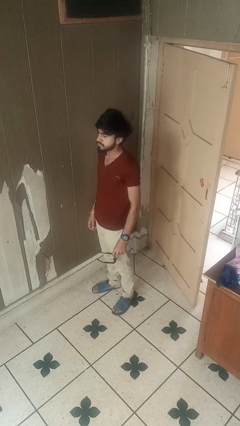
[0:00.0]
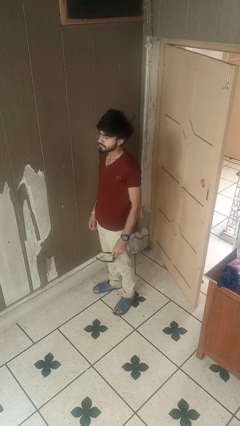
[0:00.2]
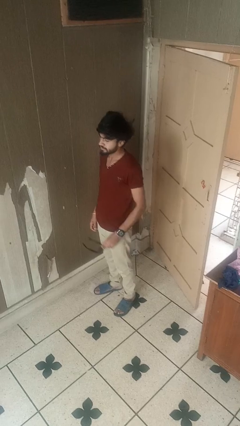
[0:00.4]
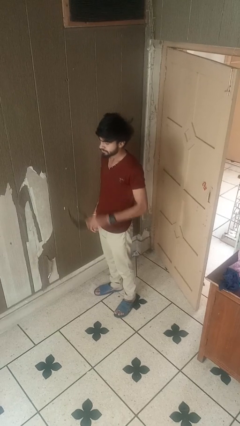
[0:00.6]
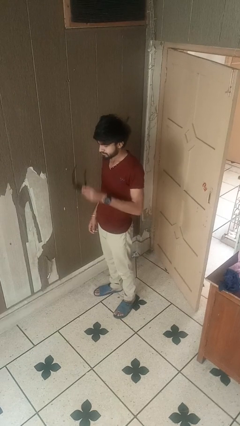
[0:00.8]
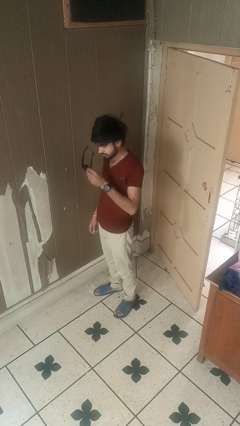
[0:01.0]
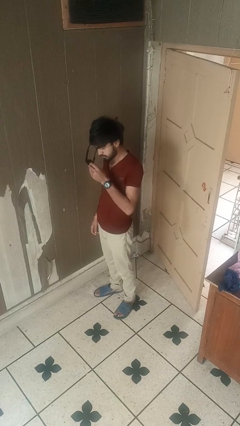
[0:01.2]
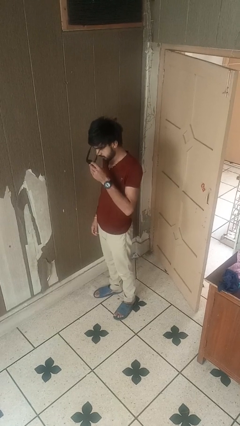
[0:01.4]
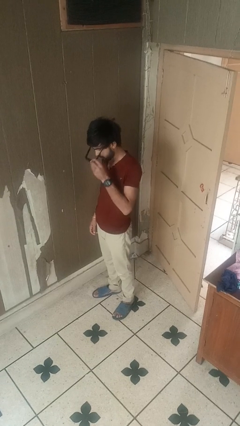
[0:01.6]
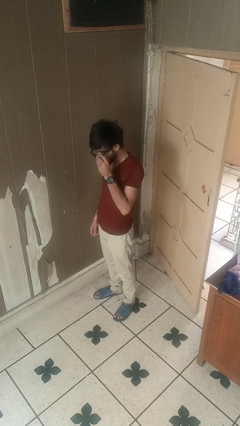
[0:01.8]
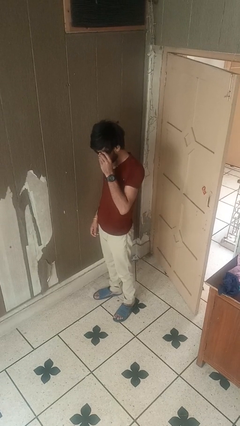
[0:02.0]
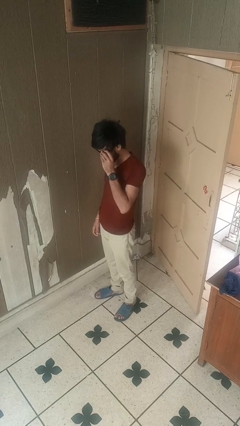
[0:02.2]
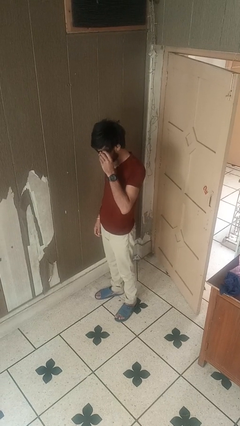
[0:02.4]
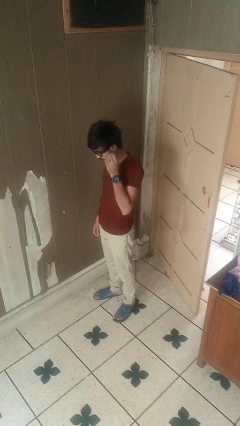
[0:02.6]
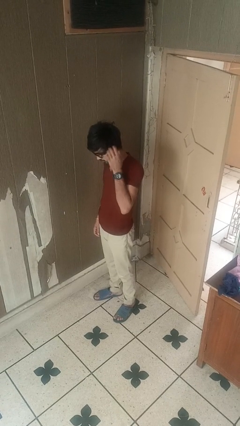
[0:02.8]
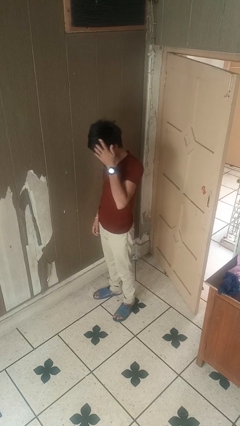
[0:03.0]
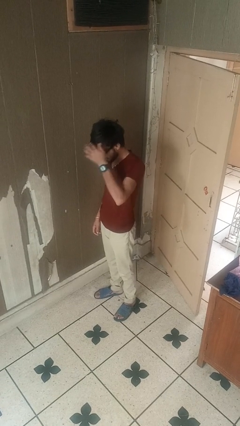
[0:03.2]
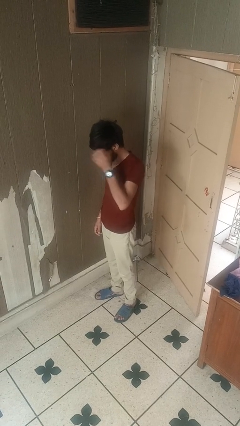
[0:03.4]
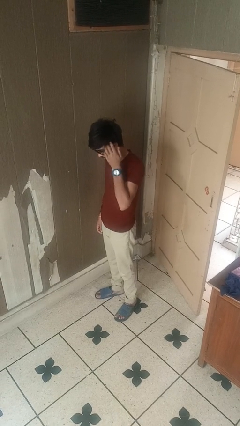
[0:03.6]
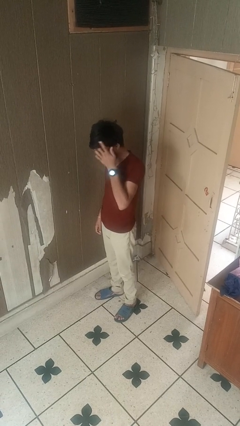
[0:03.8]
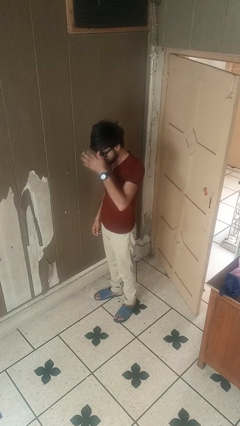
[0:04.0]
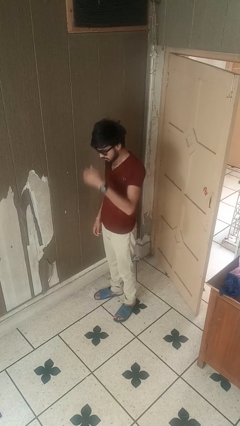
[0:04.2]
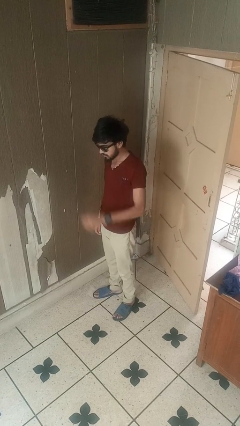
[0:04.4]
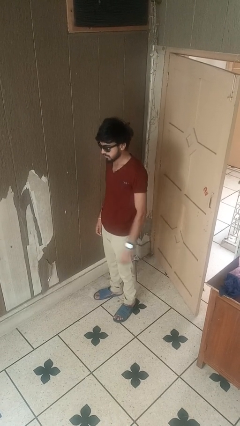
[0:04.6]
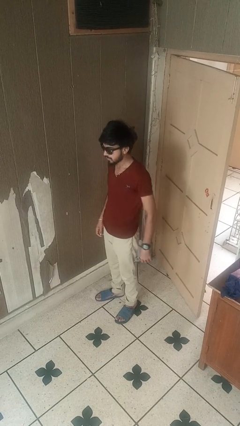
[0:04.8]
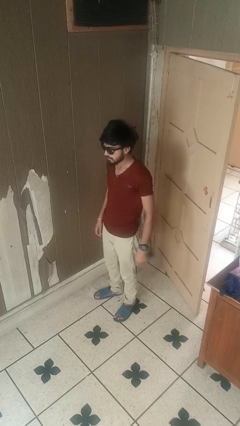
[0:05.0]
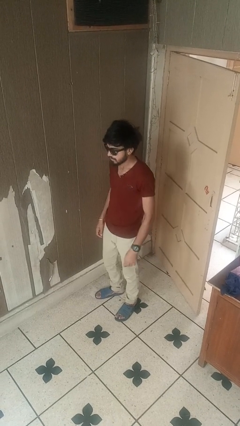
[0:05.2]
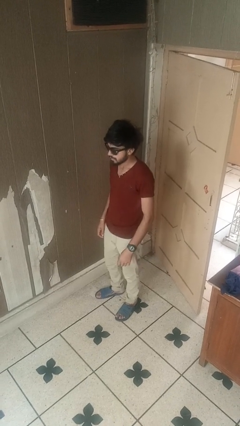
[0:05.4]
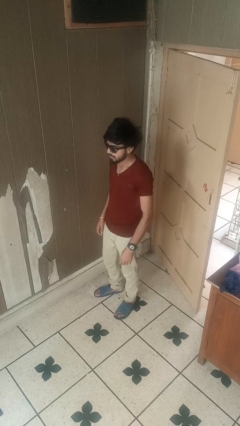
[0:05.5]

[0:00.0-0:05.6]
person puts on sunglasses

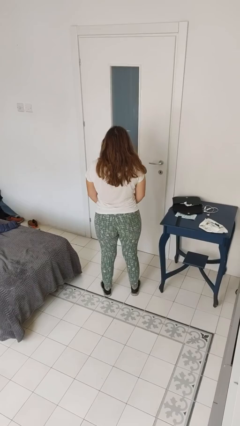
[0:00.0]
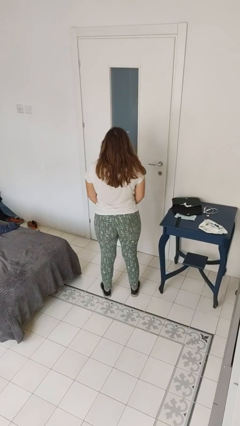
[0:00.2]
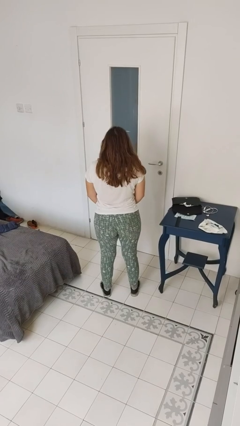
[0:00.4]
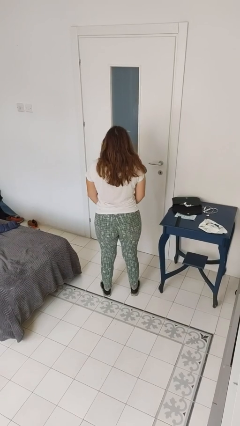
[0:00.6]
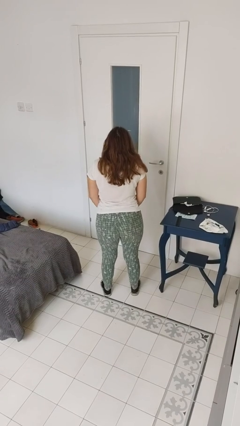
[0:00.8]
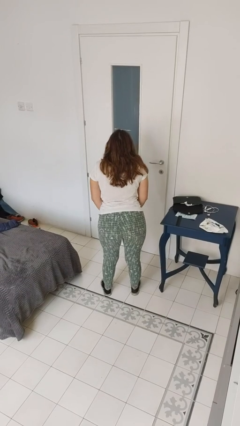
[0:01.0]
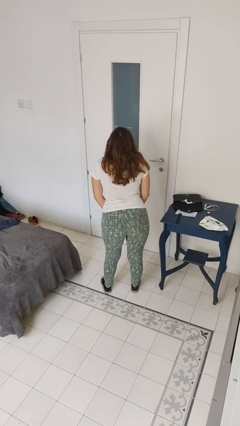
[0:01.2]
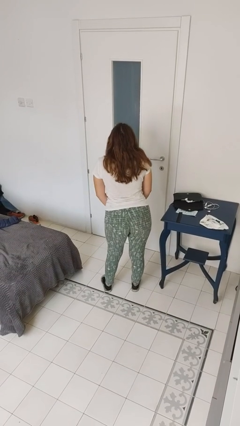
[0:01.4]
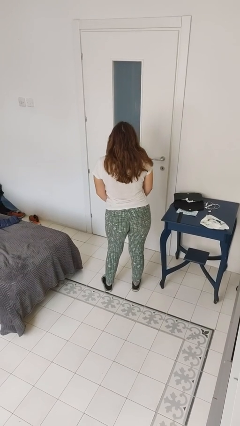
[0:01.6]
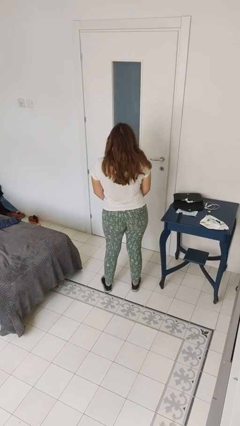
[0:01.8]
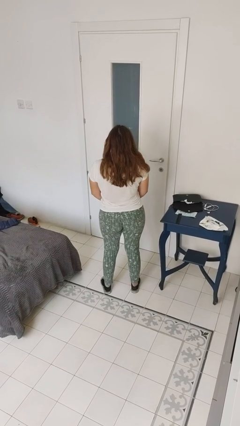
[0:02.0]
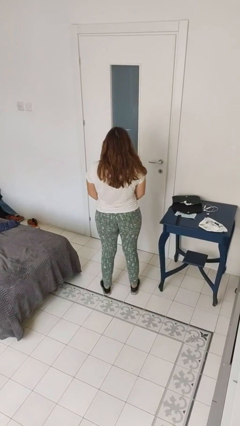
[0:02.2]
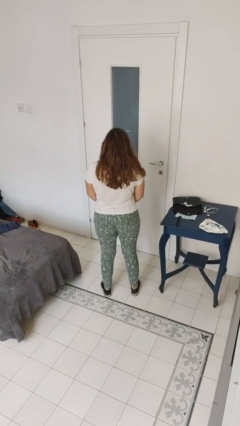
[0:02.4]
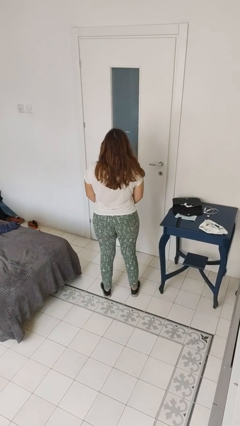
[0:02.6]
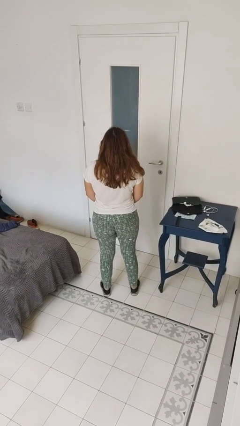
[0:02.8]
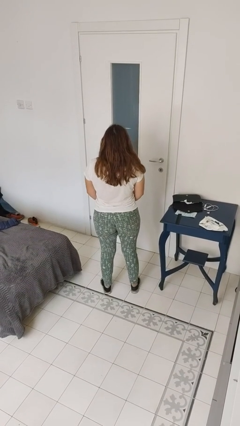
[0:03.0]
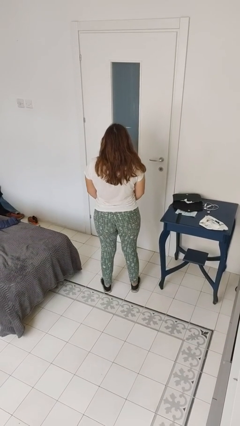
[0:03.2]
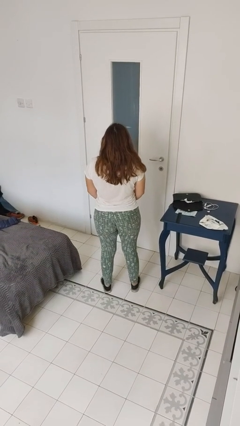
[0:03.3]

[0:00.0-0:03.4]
person wiggles hips

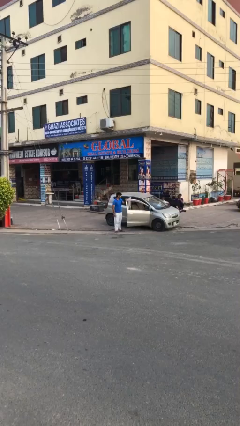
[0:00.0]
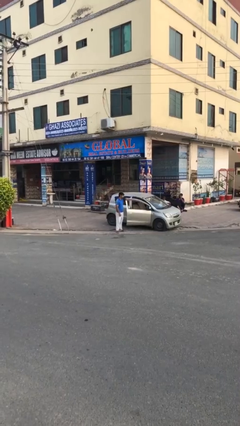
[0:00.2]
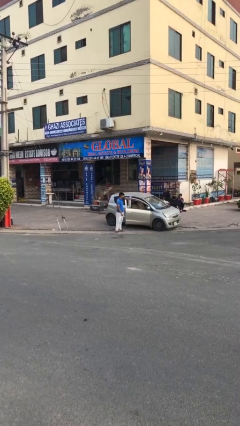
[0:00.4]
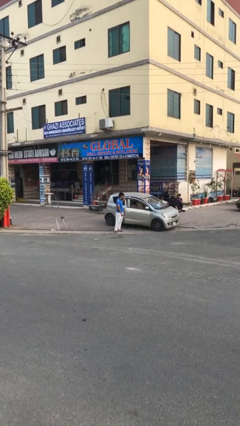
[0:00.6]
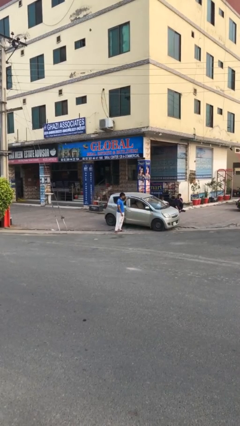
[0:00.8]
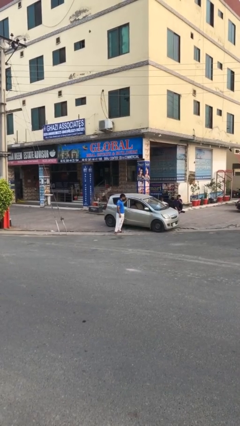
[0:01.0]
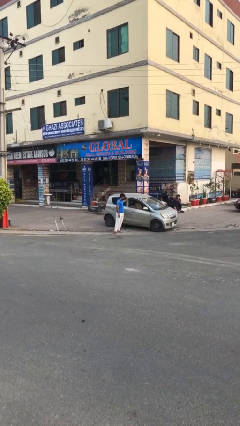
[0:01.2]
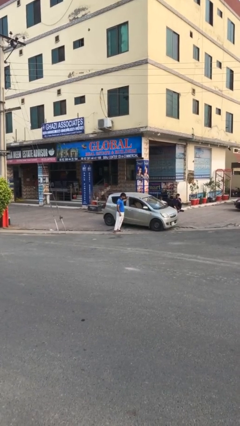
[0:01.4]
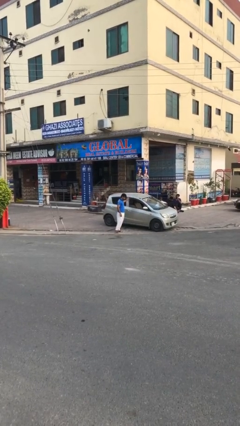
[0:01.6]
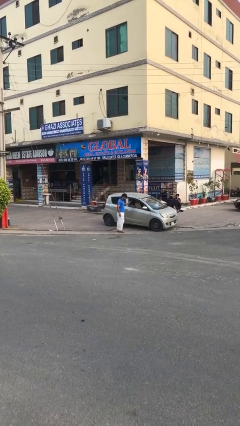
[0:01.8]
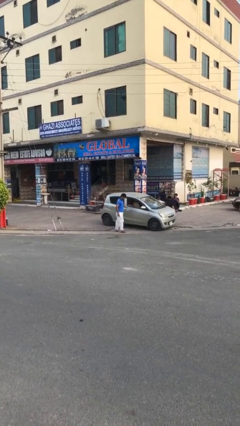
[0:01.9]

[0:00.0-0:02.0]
person closes car door

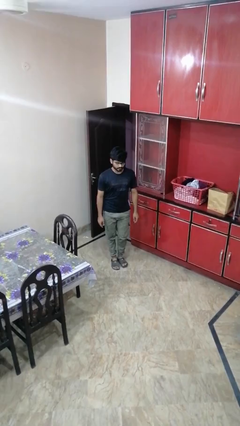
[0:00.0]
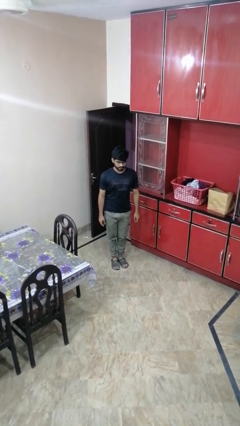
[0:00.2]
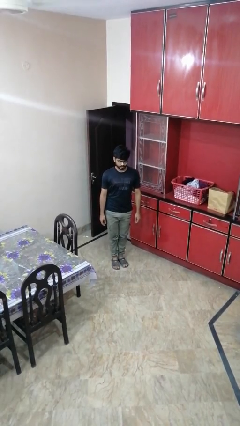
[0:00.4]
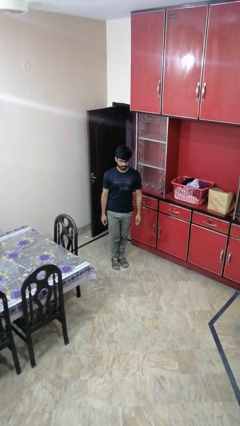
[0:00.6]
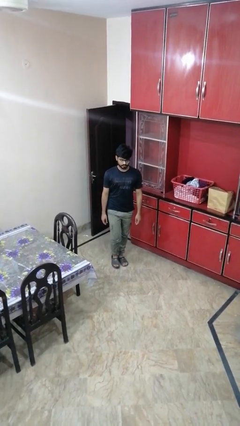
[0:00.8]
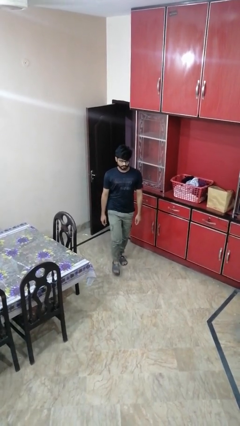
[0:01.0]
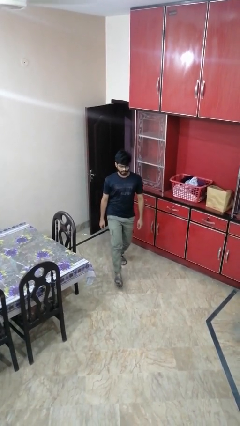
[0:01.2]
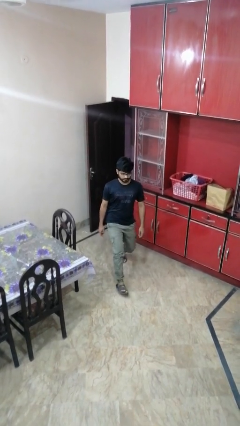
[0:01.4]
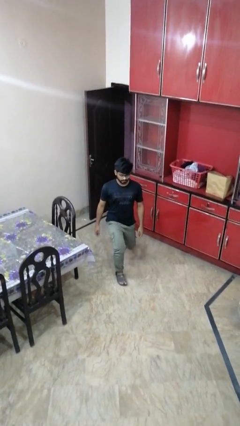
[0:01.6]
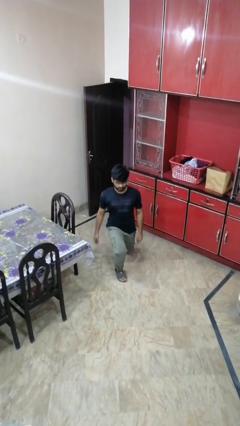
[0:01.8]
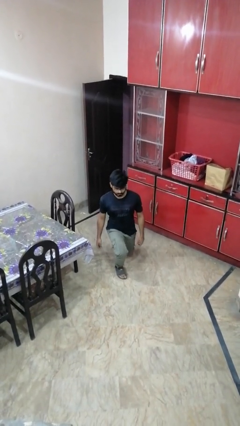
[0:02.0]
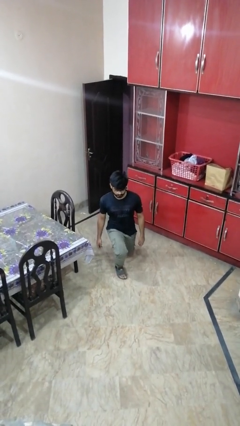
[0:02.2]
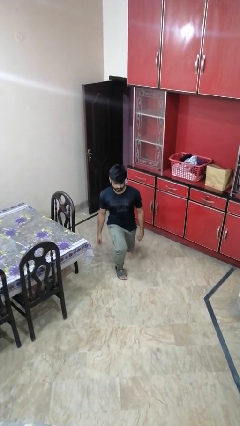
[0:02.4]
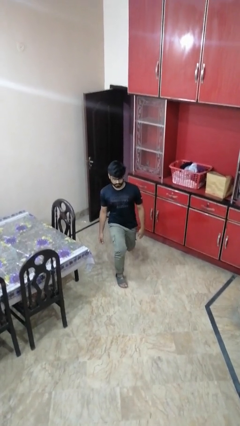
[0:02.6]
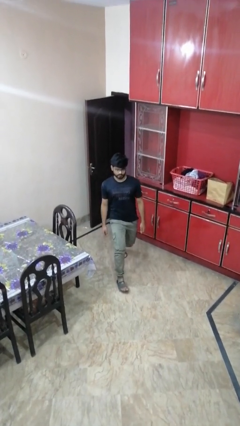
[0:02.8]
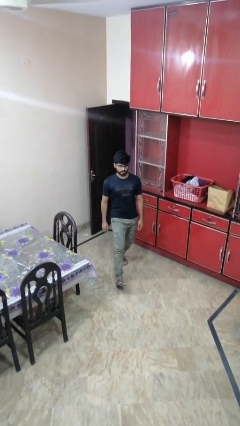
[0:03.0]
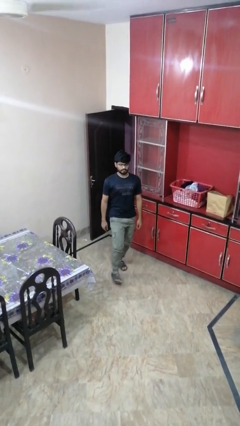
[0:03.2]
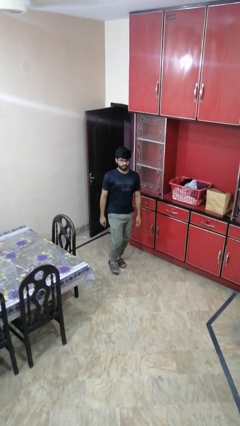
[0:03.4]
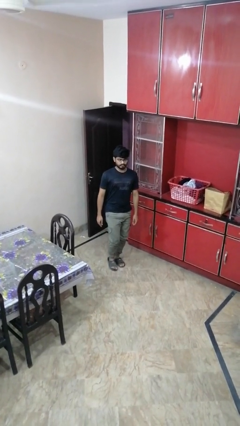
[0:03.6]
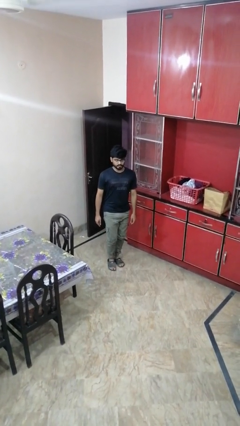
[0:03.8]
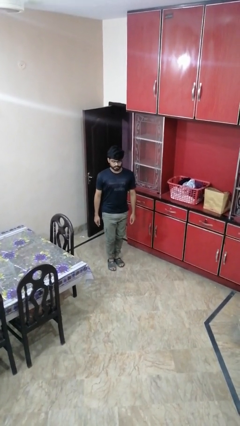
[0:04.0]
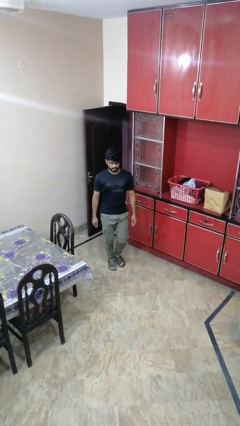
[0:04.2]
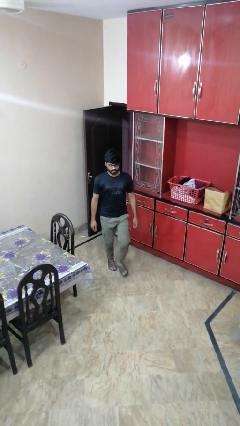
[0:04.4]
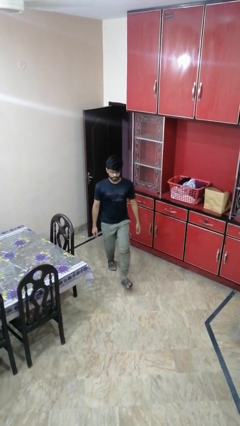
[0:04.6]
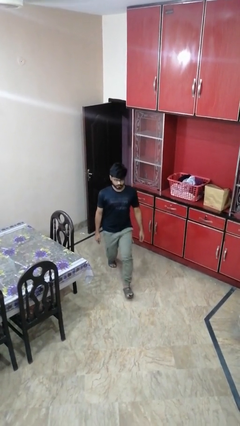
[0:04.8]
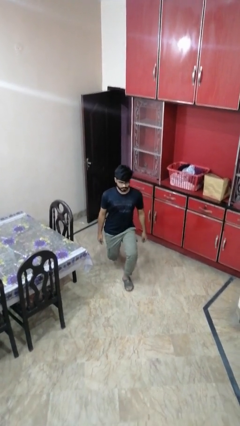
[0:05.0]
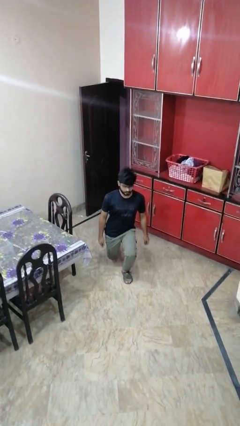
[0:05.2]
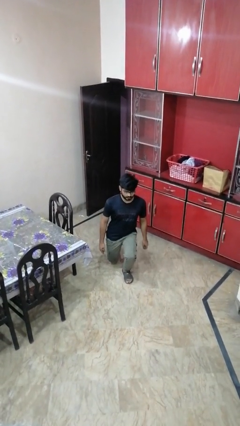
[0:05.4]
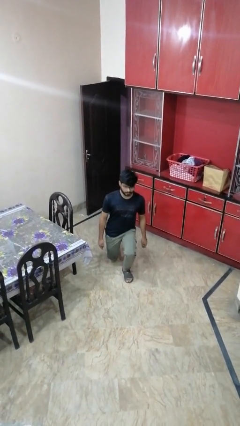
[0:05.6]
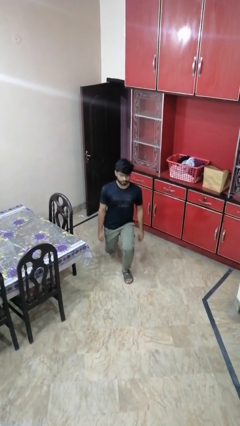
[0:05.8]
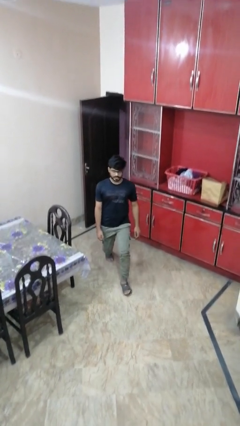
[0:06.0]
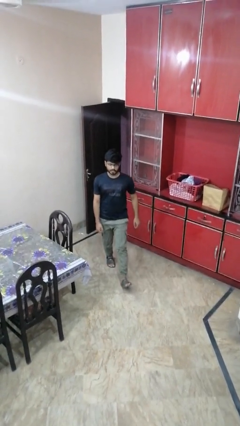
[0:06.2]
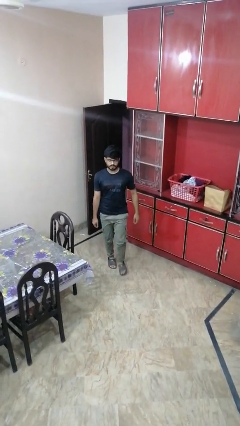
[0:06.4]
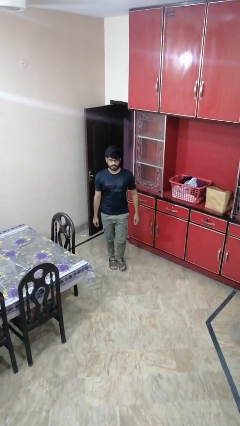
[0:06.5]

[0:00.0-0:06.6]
person exercises with lunges
